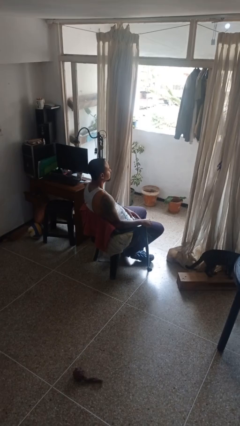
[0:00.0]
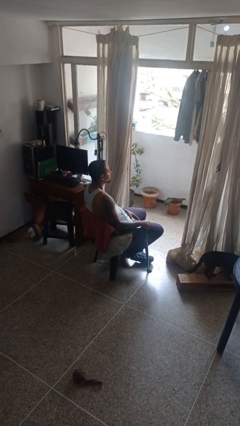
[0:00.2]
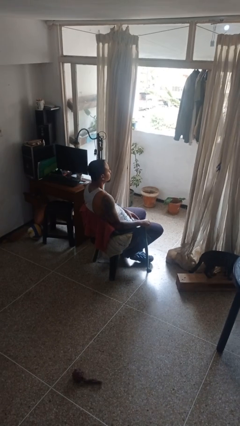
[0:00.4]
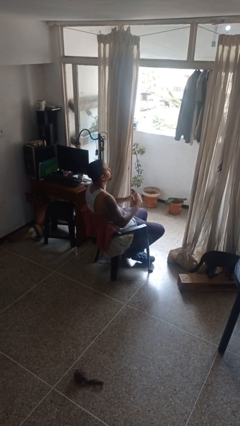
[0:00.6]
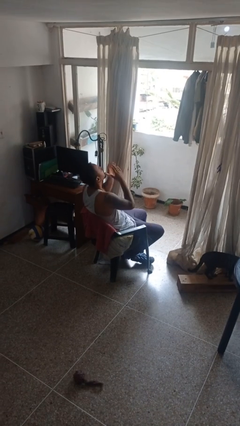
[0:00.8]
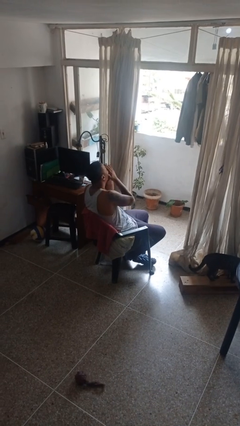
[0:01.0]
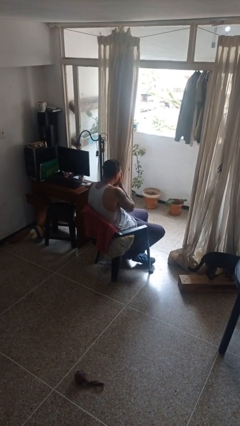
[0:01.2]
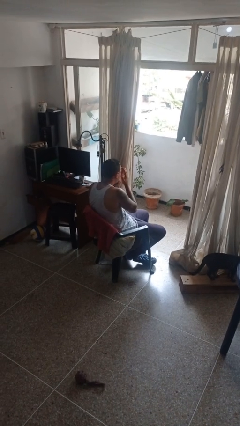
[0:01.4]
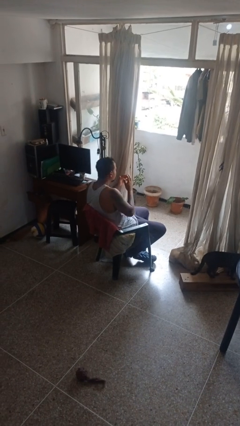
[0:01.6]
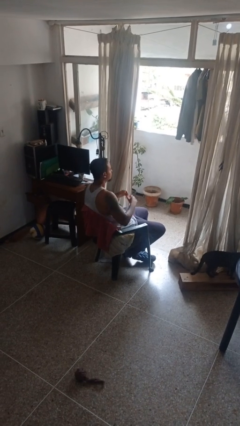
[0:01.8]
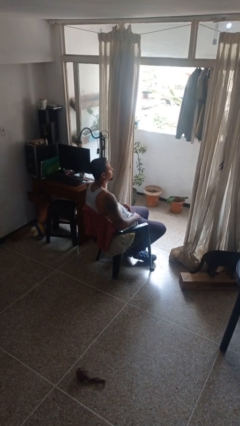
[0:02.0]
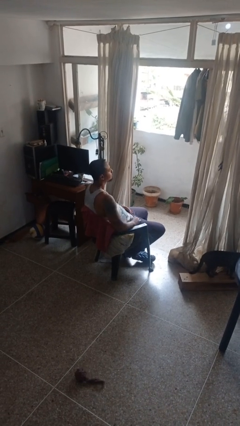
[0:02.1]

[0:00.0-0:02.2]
person sneezes into hand

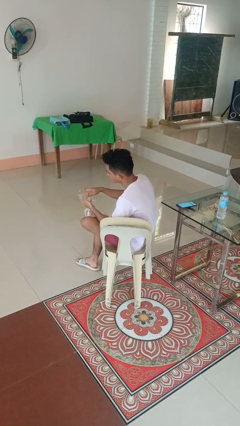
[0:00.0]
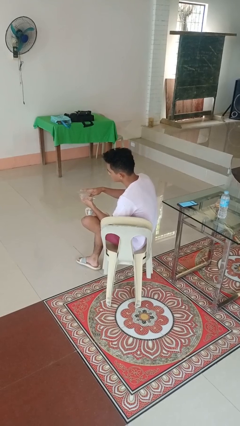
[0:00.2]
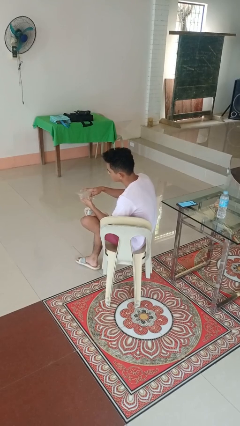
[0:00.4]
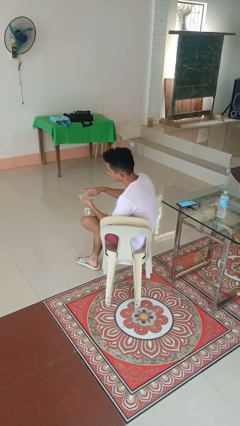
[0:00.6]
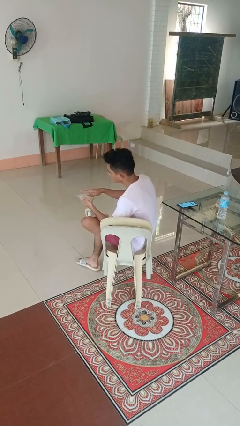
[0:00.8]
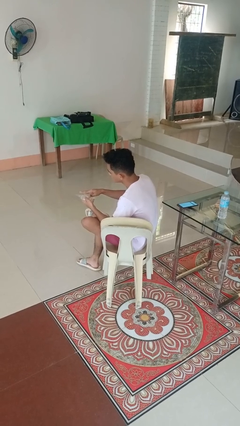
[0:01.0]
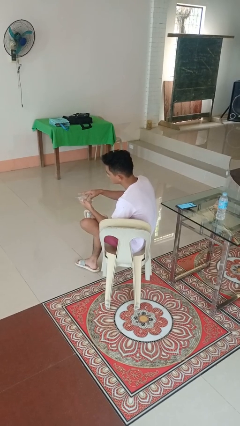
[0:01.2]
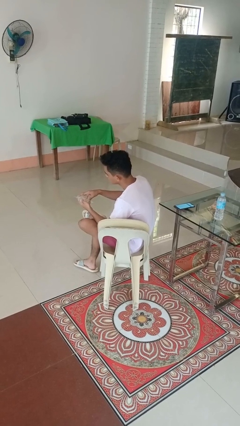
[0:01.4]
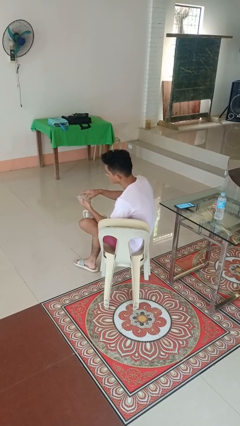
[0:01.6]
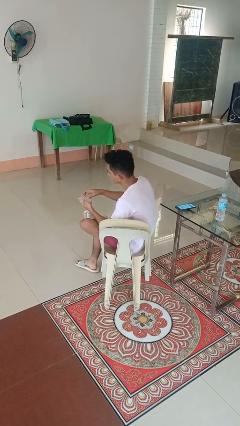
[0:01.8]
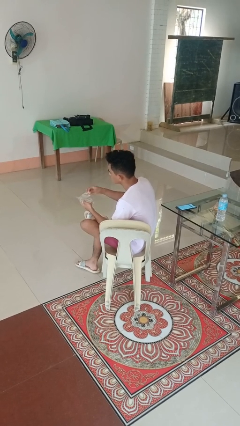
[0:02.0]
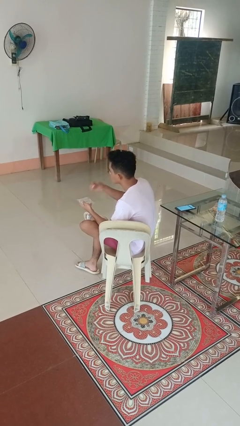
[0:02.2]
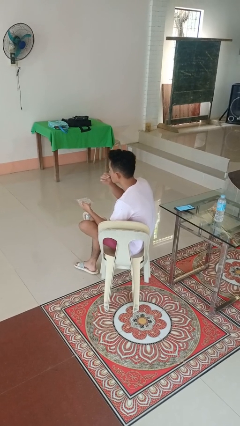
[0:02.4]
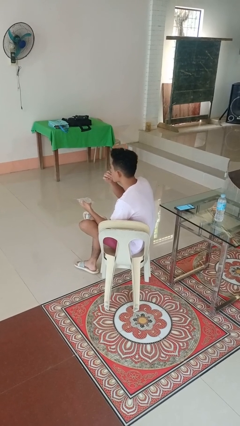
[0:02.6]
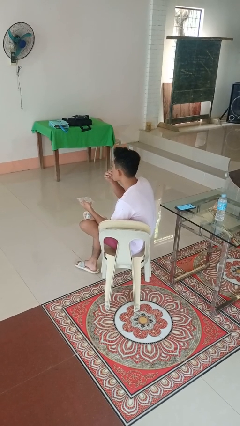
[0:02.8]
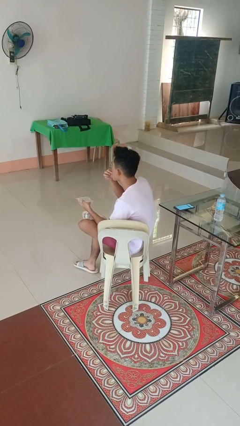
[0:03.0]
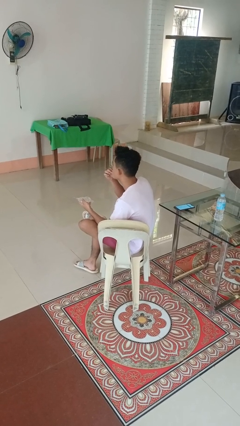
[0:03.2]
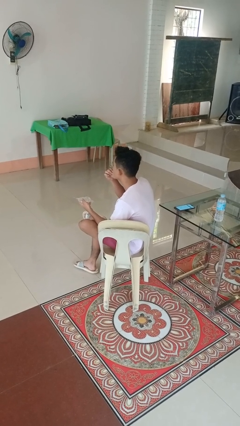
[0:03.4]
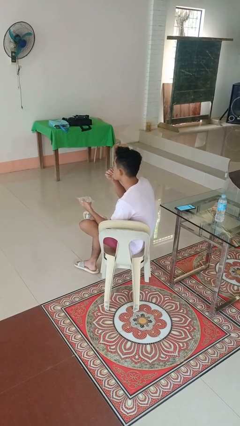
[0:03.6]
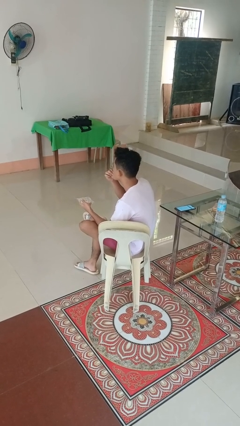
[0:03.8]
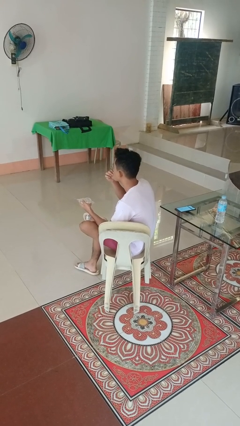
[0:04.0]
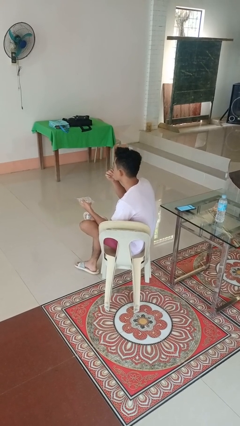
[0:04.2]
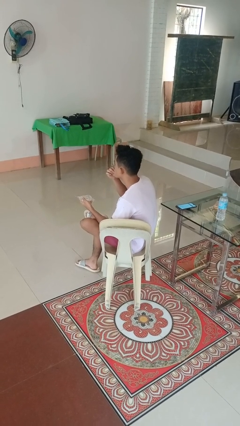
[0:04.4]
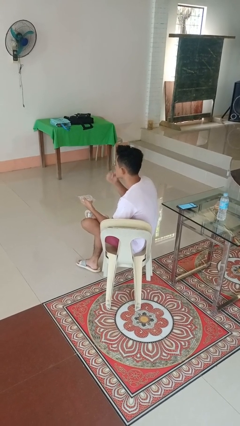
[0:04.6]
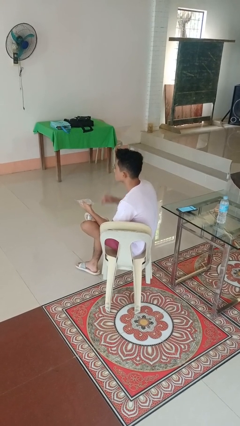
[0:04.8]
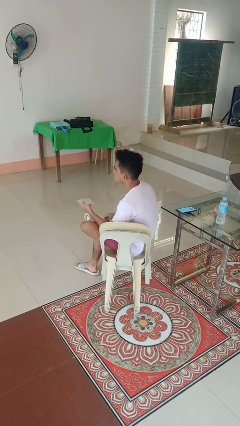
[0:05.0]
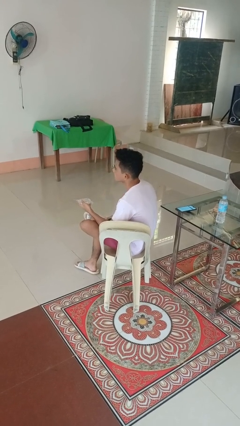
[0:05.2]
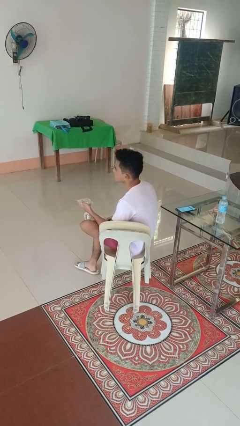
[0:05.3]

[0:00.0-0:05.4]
person eats snack from bag

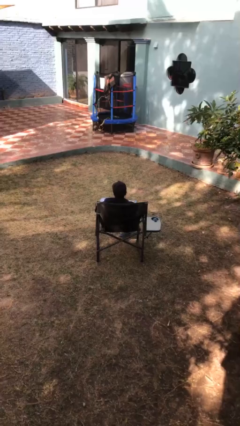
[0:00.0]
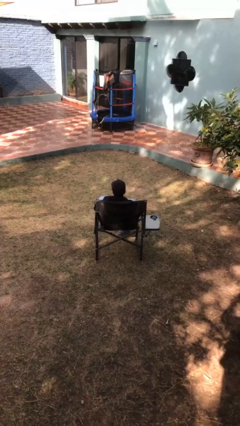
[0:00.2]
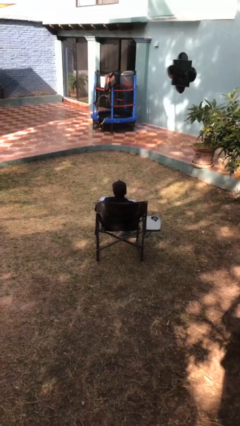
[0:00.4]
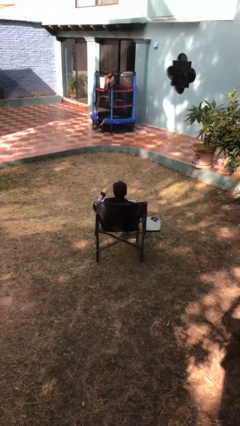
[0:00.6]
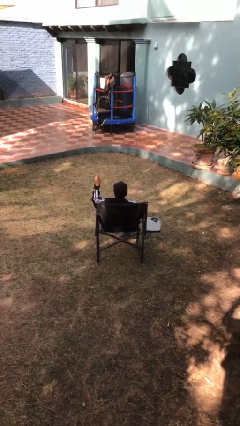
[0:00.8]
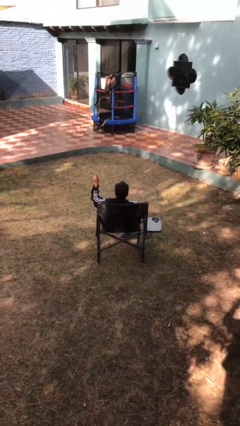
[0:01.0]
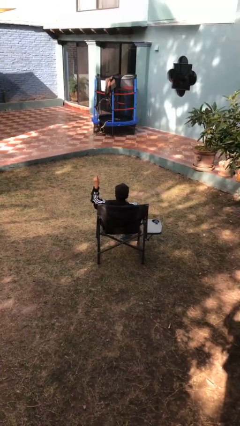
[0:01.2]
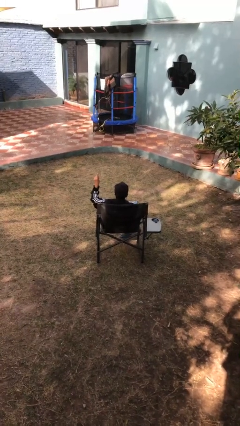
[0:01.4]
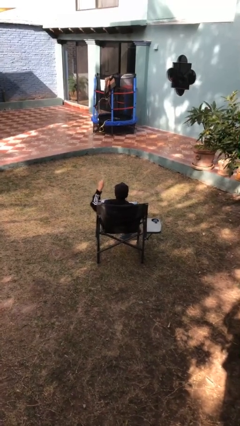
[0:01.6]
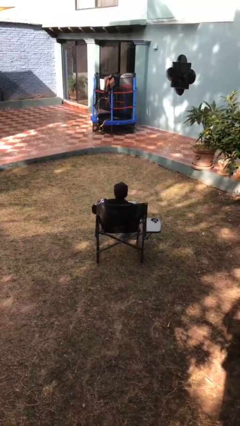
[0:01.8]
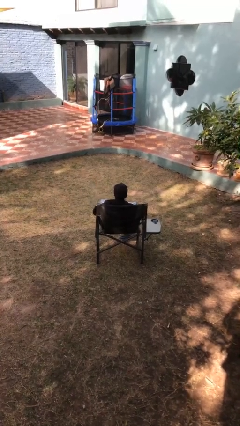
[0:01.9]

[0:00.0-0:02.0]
person gestures number one

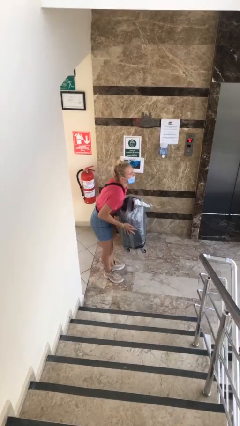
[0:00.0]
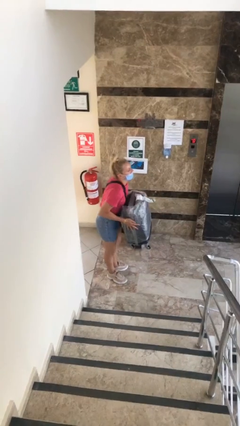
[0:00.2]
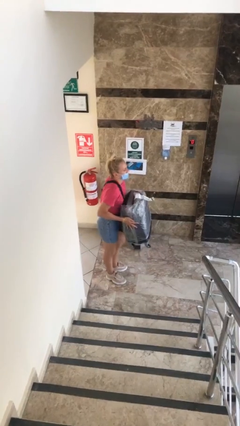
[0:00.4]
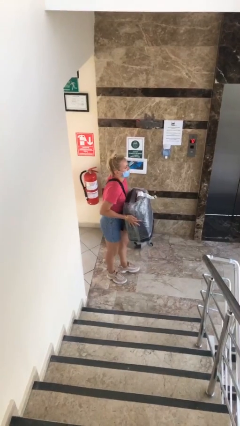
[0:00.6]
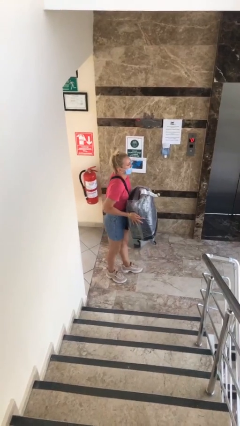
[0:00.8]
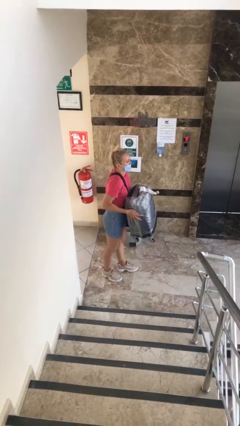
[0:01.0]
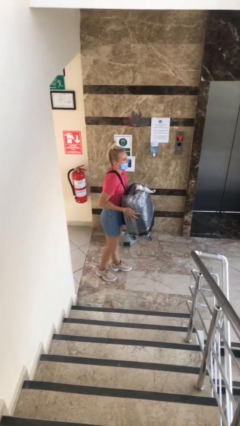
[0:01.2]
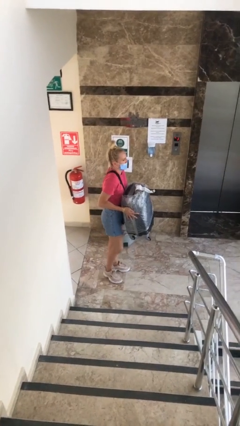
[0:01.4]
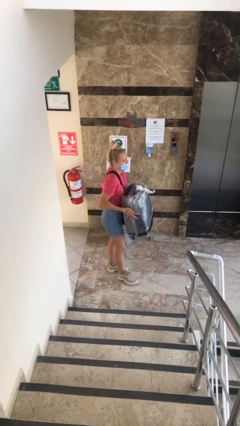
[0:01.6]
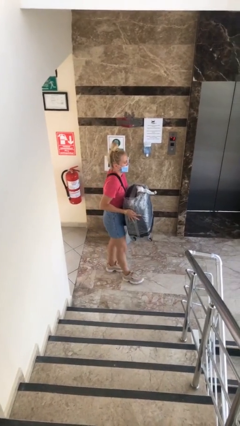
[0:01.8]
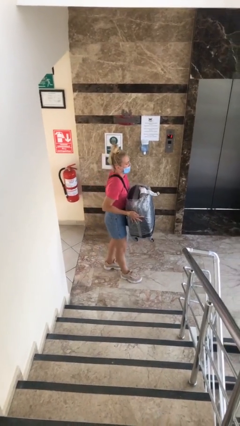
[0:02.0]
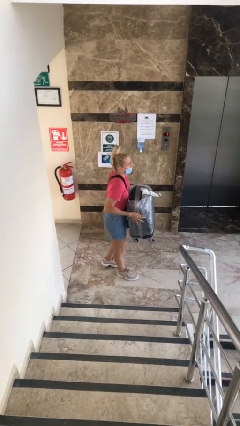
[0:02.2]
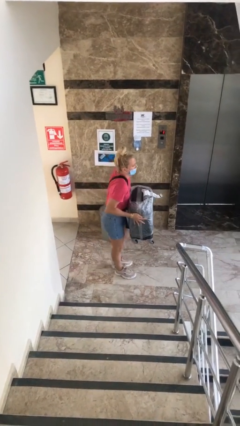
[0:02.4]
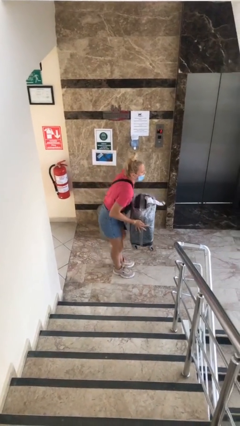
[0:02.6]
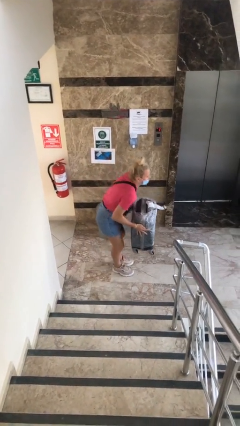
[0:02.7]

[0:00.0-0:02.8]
person carries heavy object

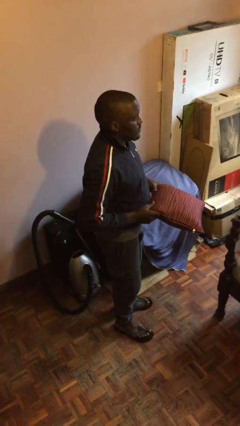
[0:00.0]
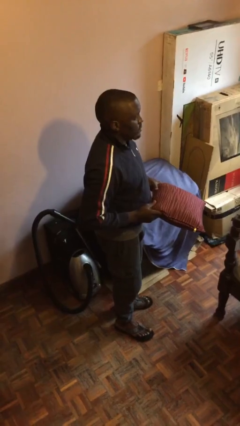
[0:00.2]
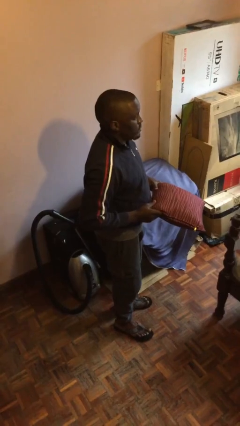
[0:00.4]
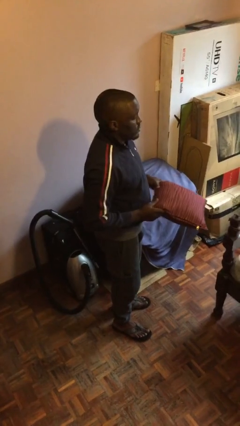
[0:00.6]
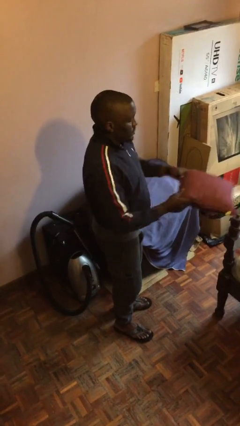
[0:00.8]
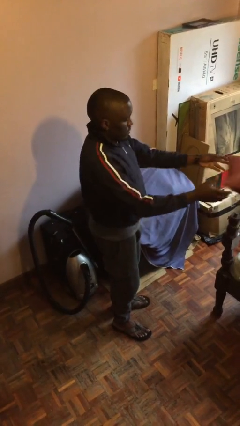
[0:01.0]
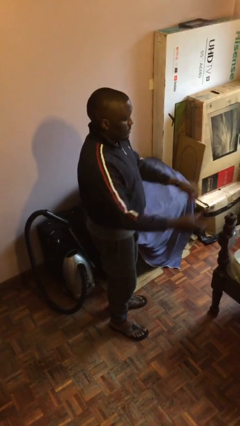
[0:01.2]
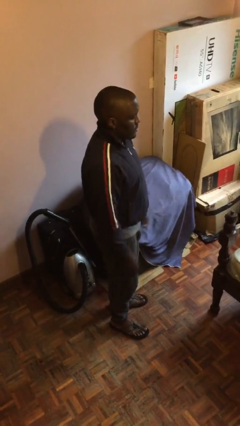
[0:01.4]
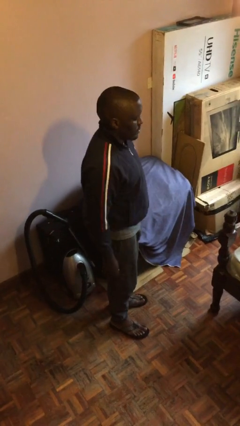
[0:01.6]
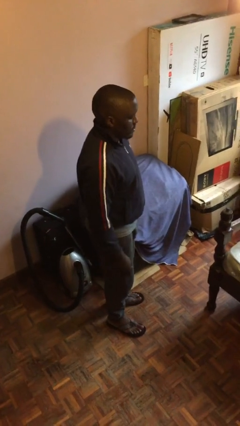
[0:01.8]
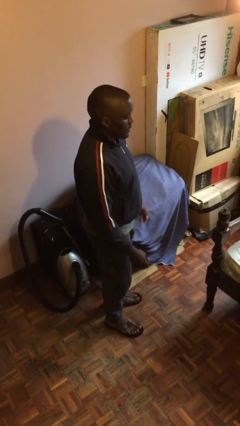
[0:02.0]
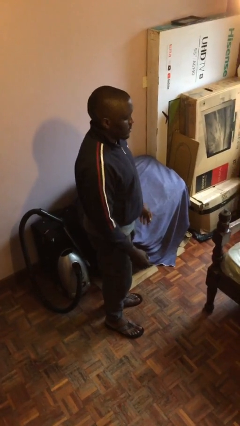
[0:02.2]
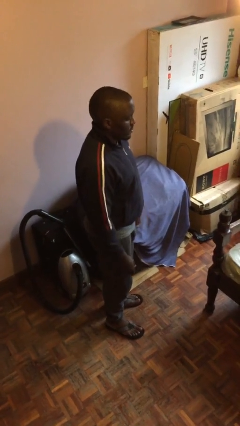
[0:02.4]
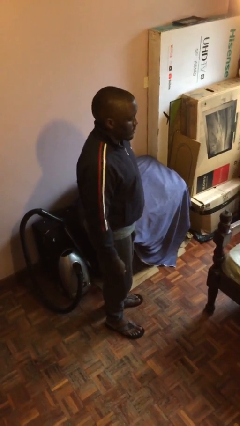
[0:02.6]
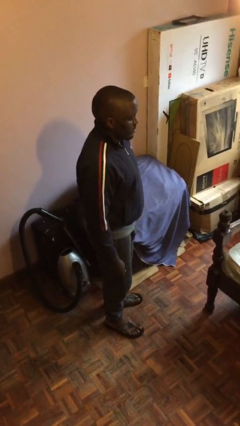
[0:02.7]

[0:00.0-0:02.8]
person throws object on bed

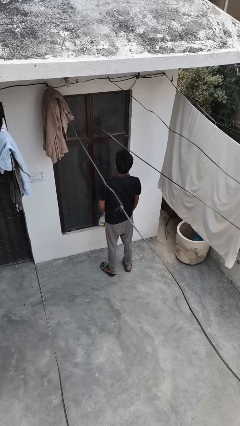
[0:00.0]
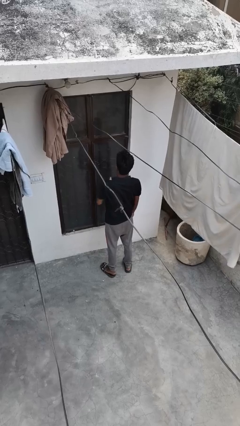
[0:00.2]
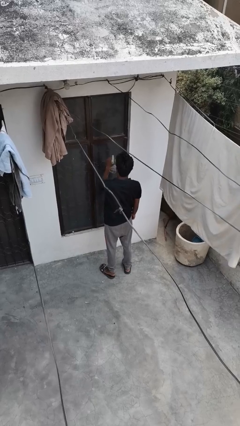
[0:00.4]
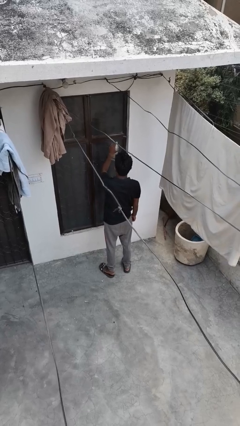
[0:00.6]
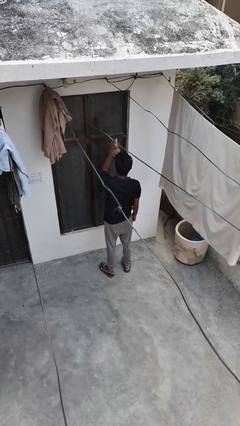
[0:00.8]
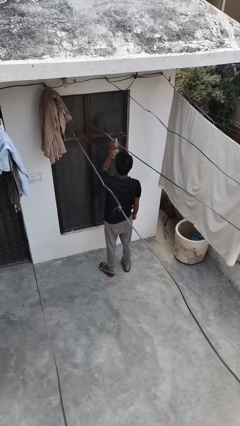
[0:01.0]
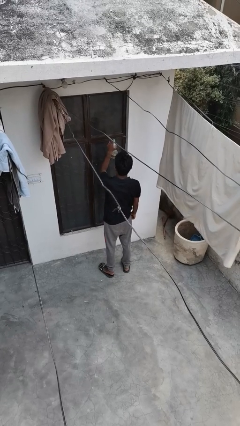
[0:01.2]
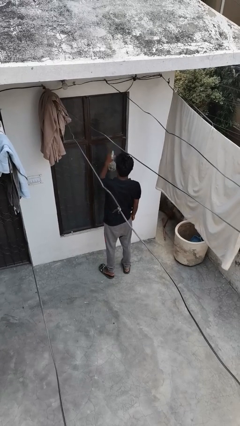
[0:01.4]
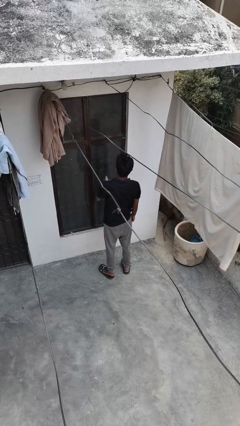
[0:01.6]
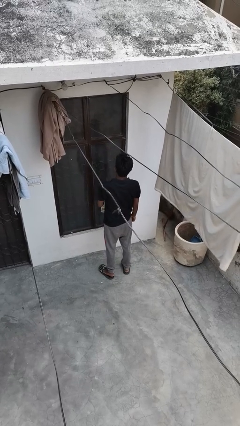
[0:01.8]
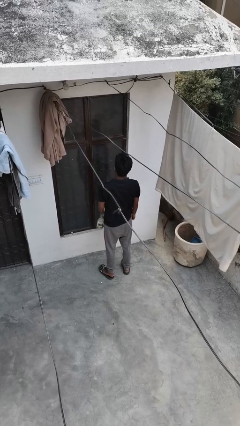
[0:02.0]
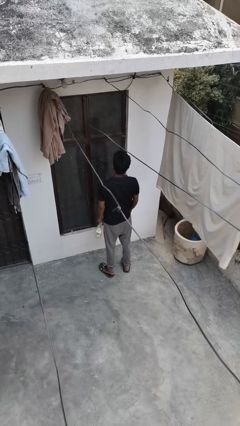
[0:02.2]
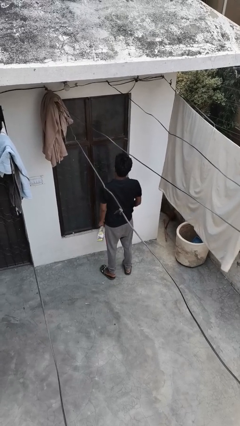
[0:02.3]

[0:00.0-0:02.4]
person sprays from bottle
